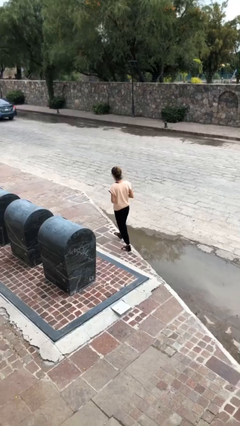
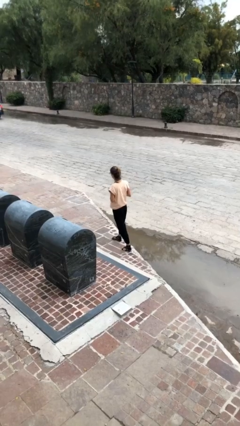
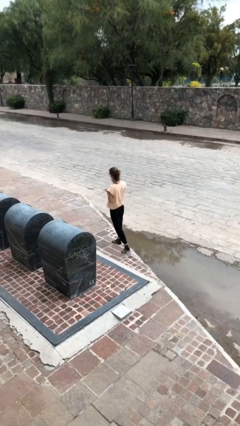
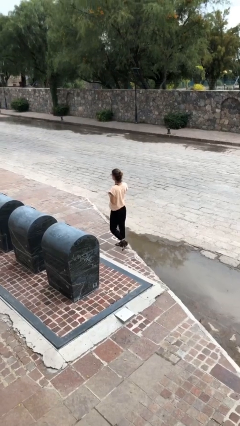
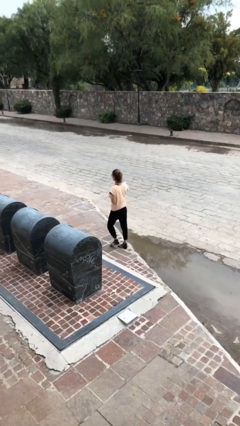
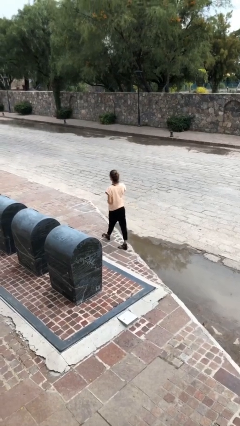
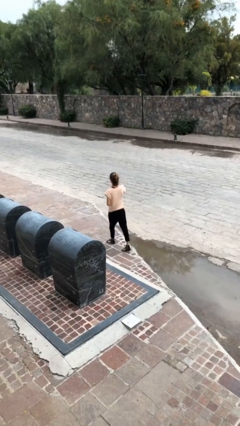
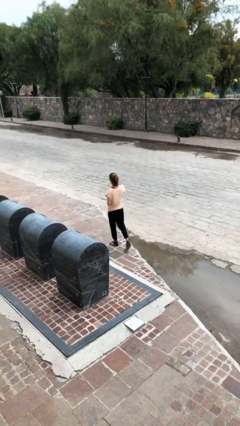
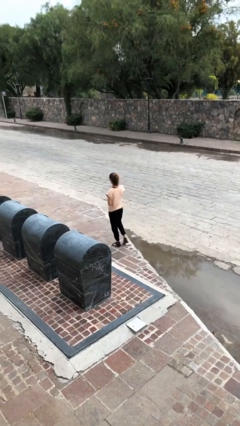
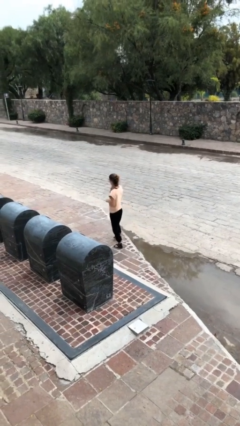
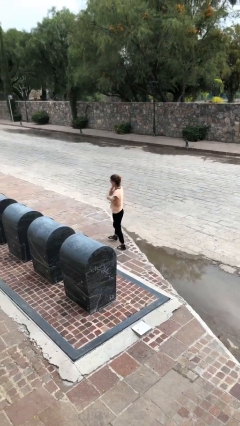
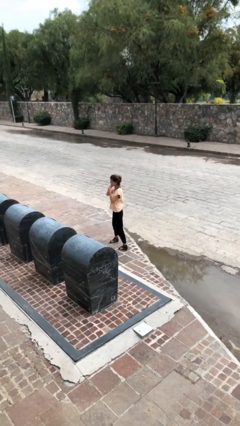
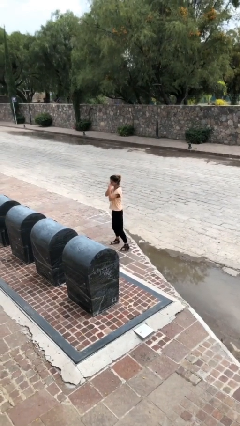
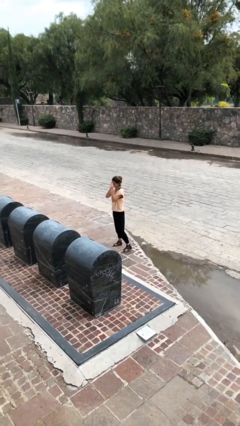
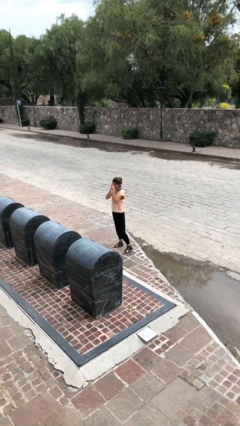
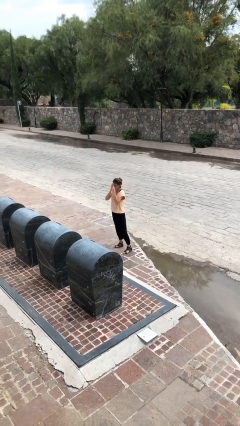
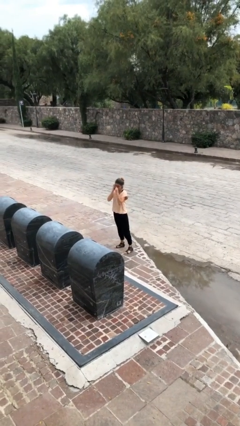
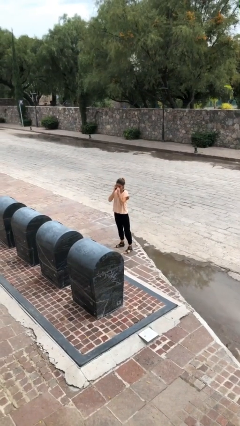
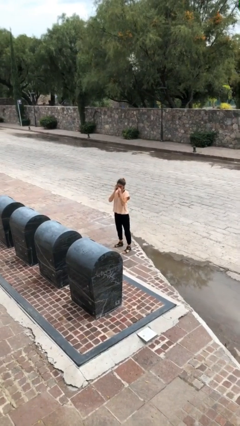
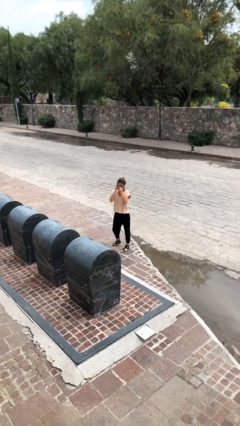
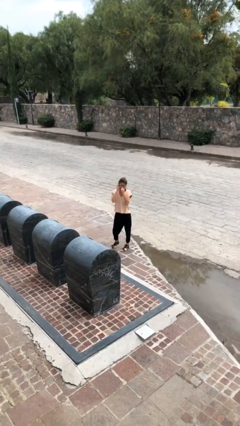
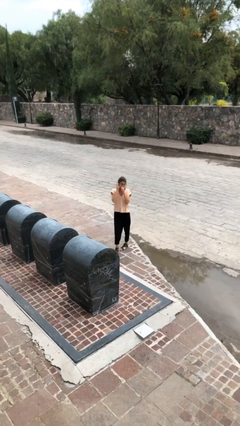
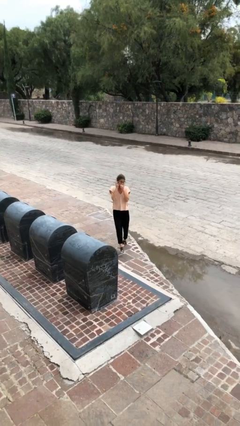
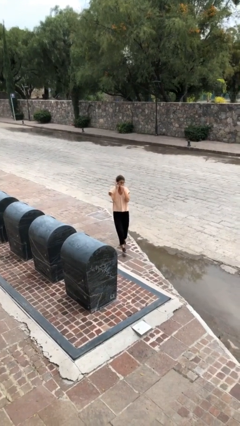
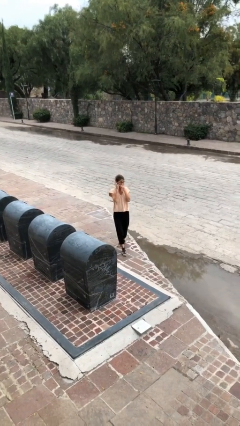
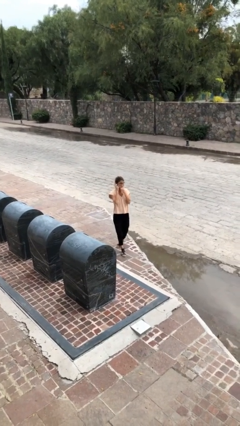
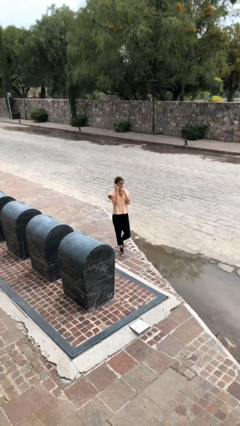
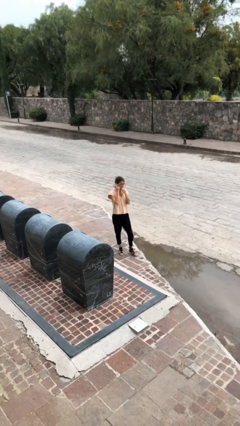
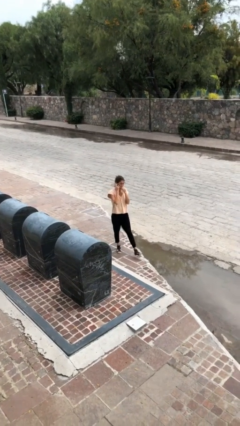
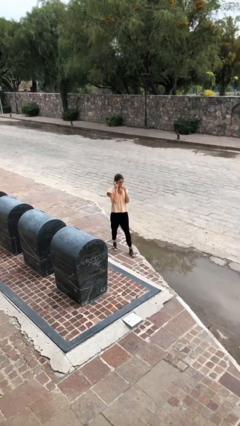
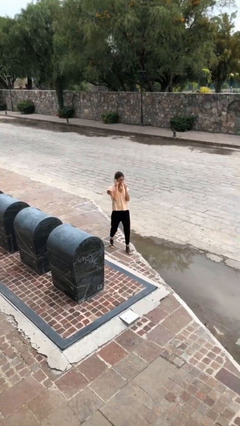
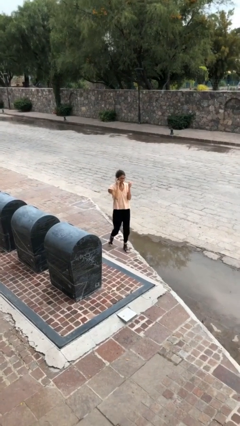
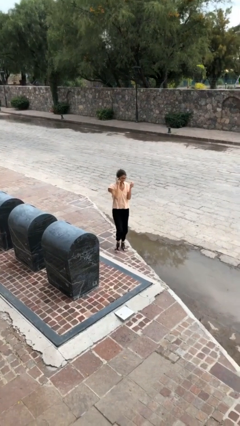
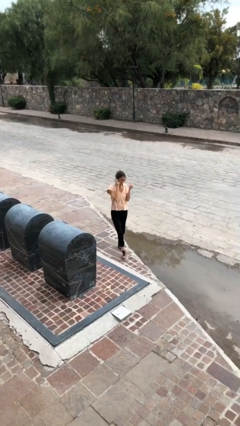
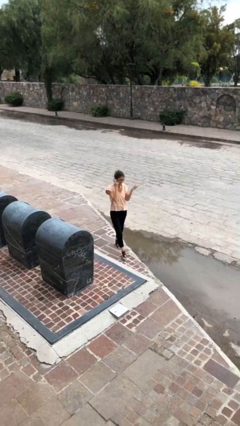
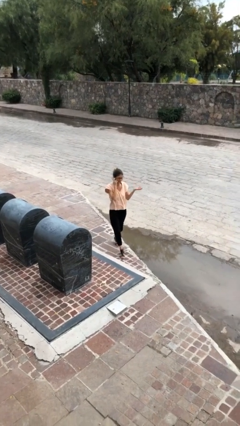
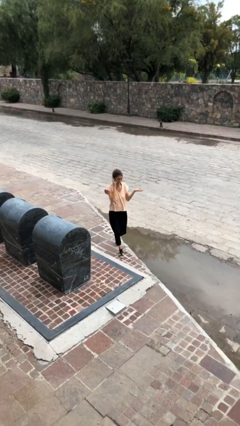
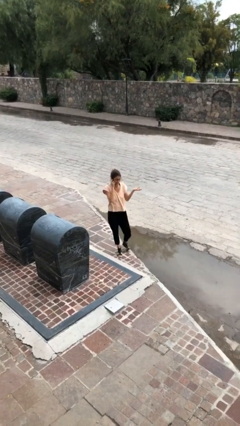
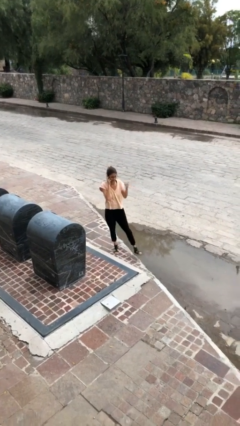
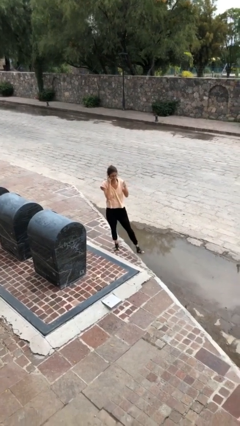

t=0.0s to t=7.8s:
person talks on phone

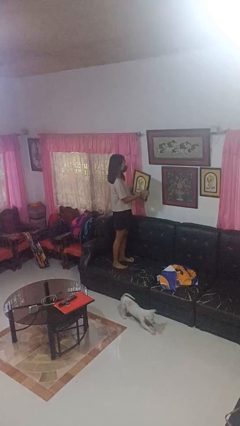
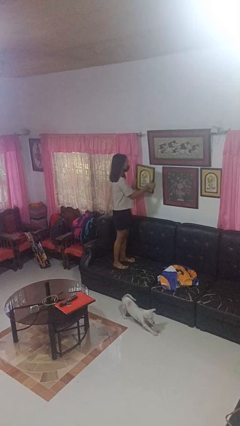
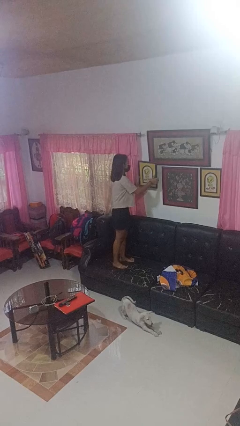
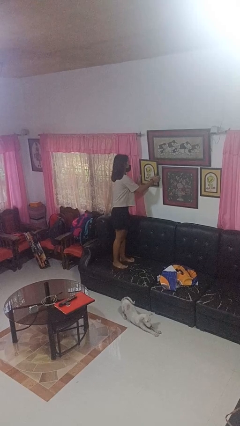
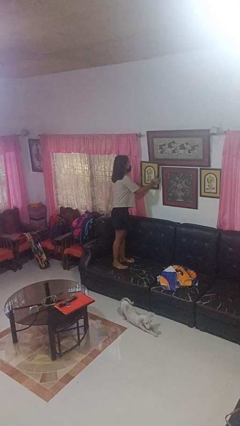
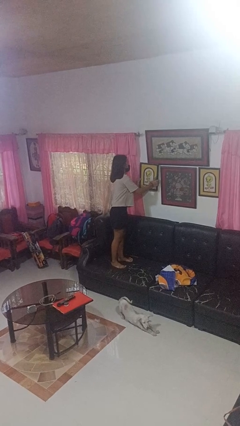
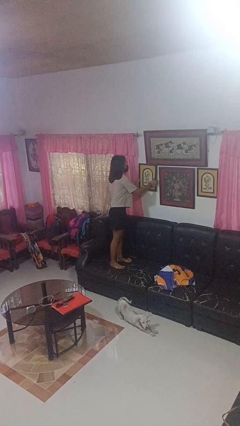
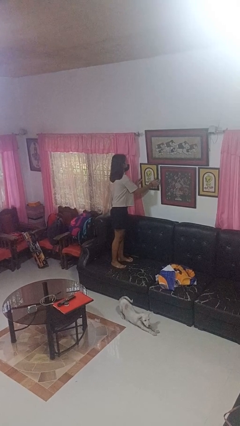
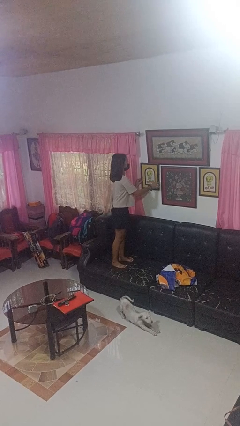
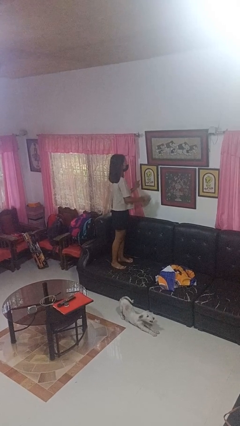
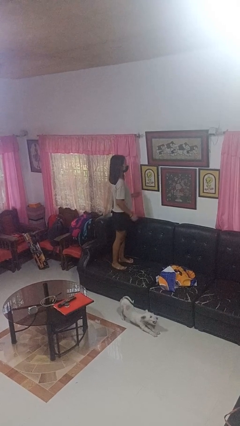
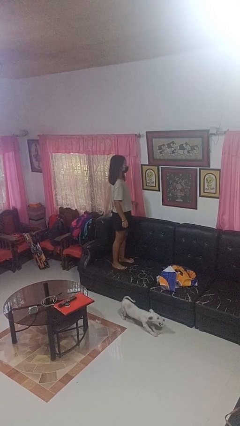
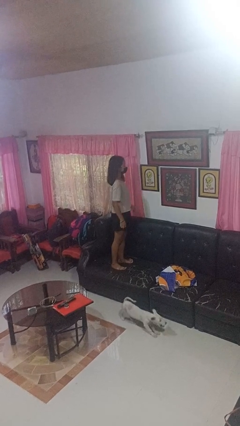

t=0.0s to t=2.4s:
person puts up picture frame

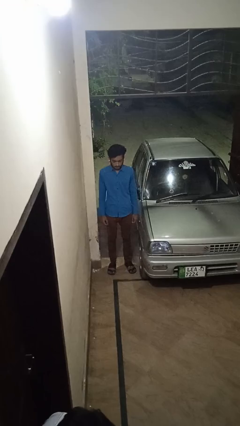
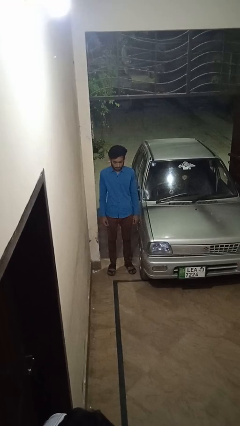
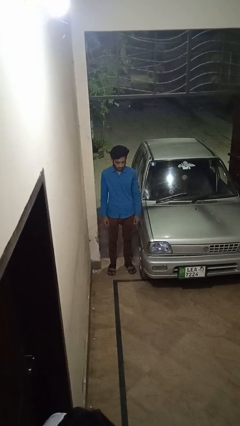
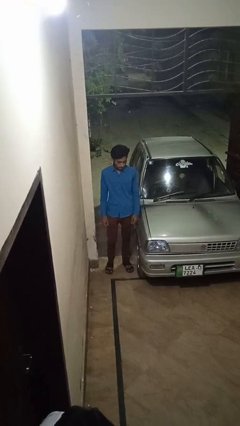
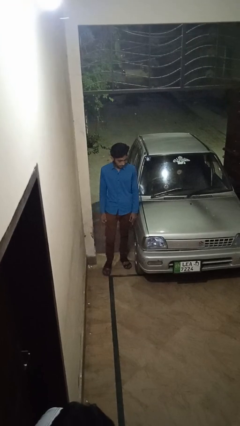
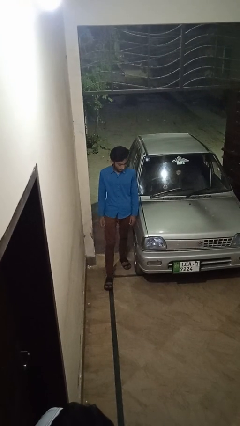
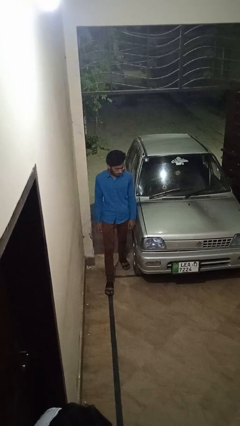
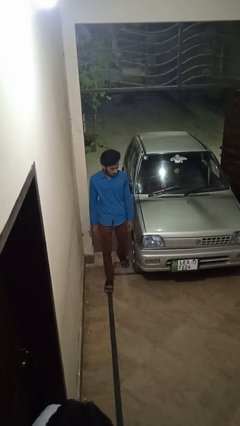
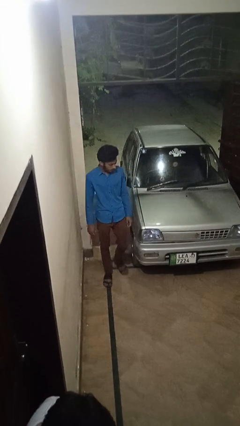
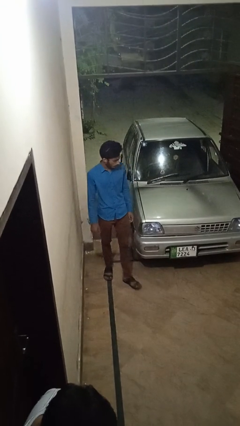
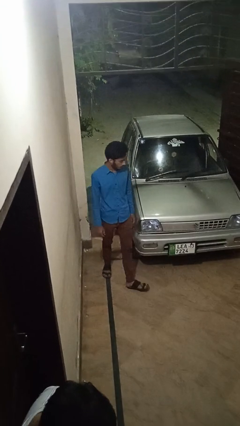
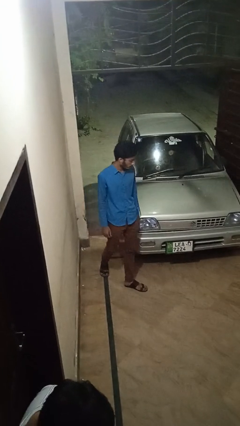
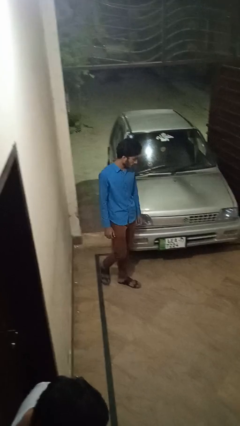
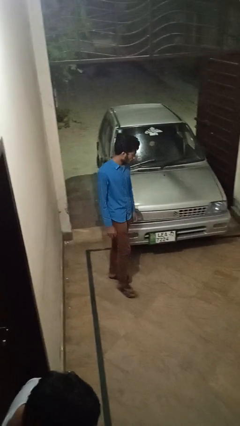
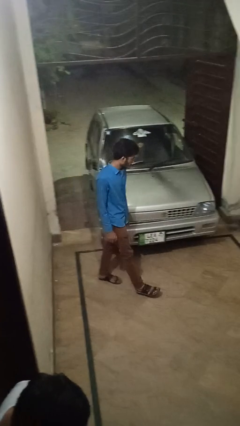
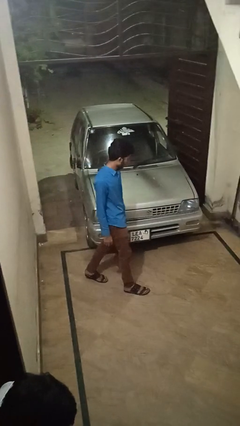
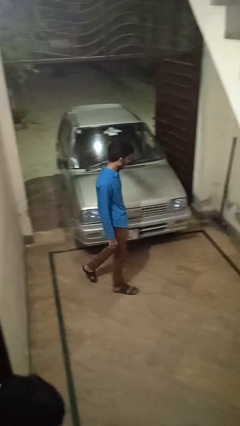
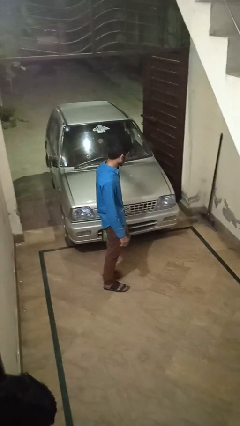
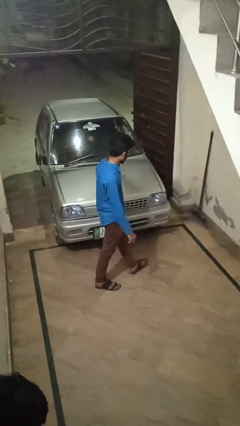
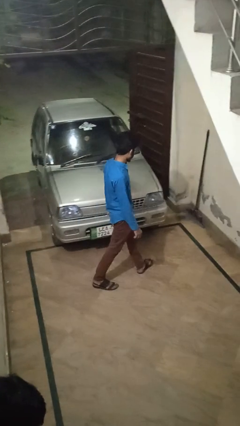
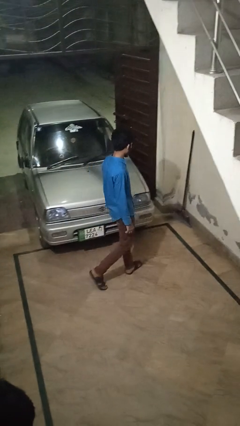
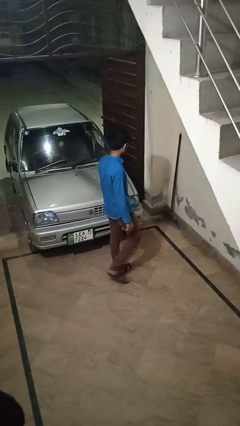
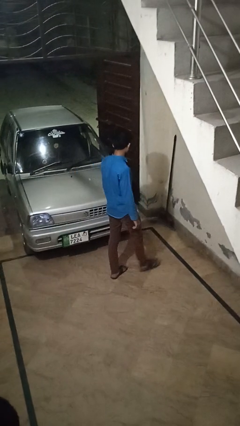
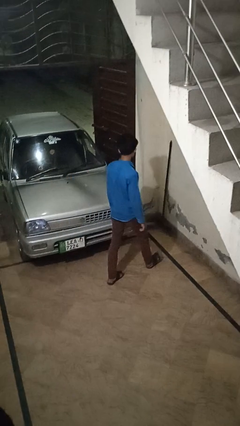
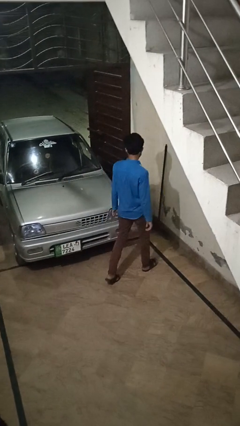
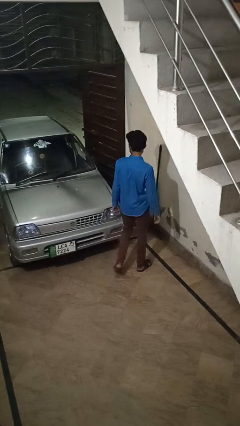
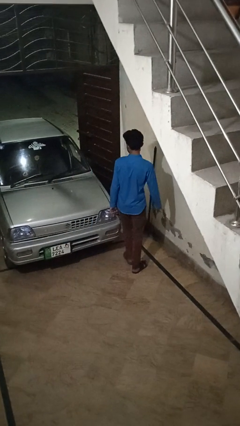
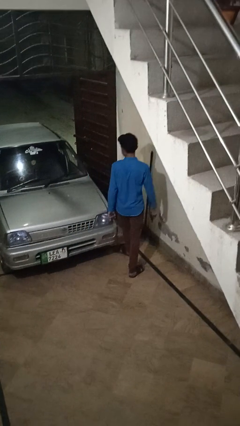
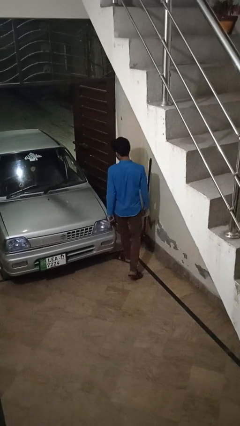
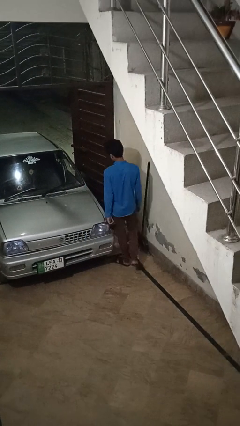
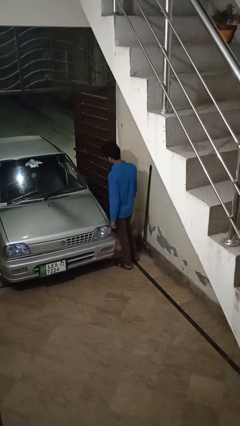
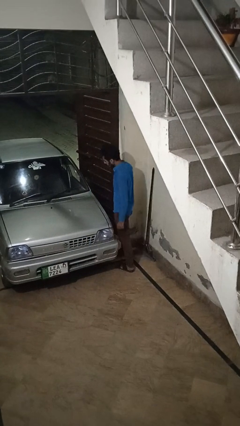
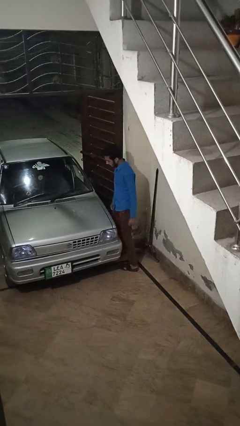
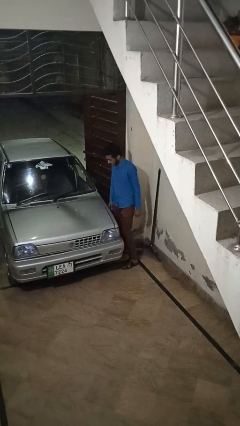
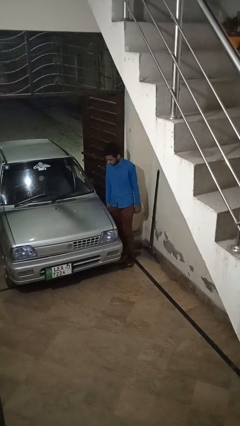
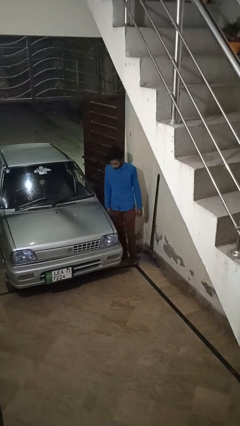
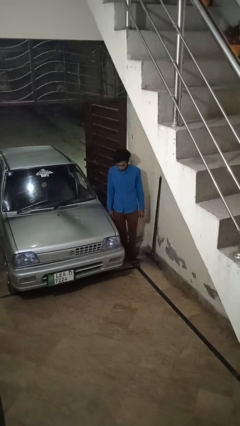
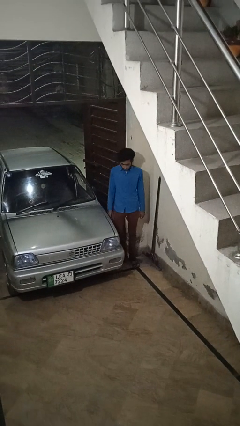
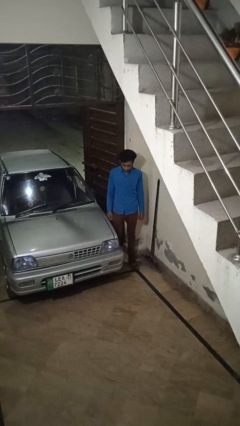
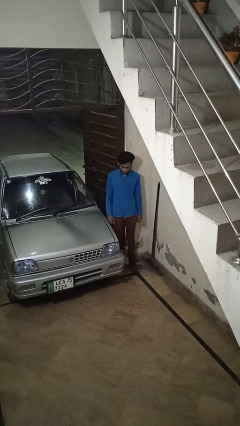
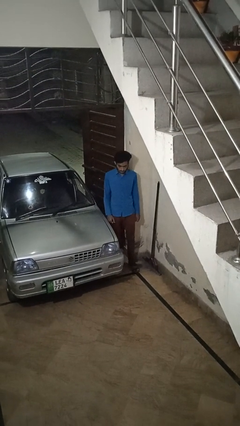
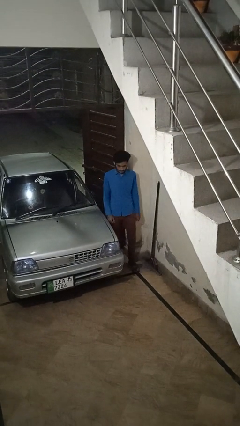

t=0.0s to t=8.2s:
person walks around car
